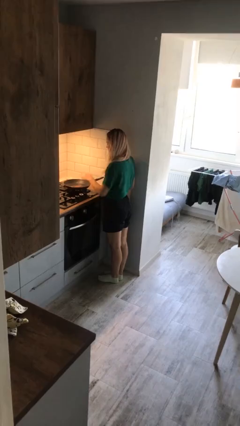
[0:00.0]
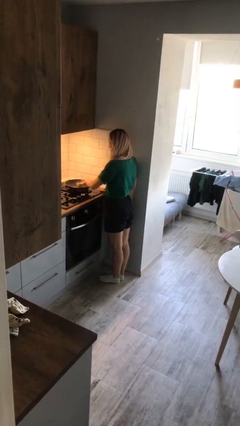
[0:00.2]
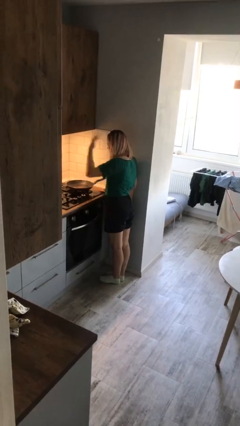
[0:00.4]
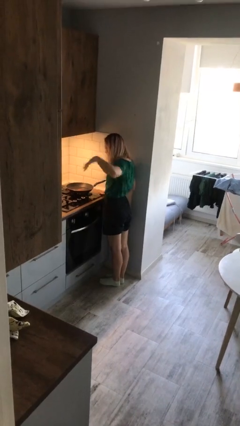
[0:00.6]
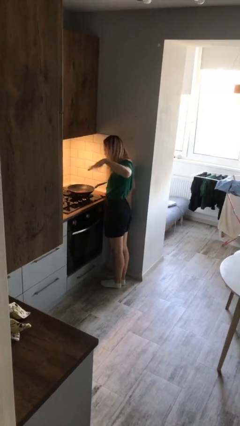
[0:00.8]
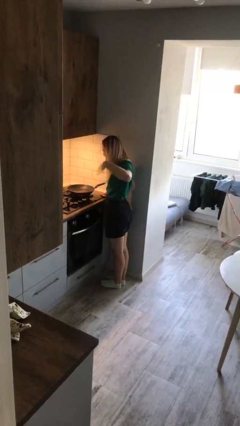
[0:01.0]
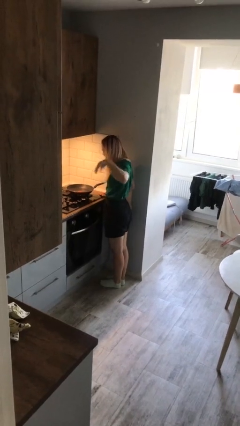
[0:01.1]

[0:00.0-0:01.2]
person burns hand

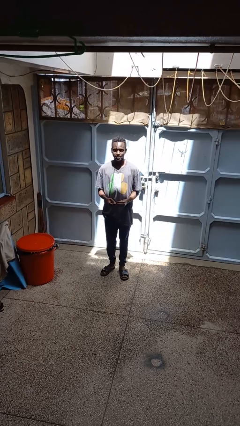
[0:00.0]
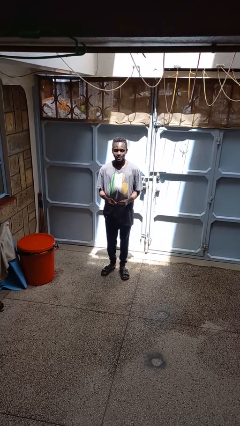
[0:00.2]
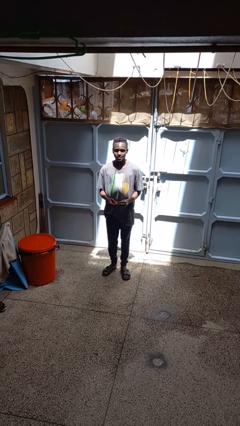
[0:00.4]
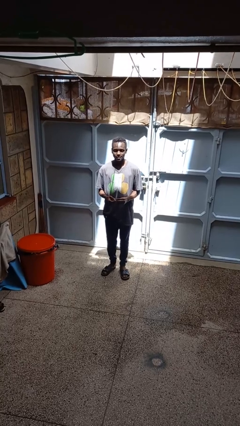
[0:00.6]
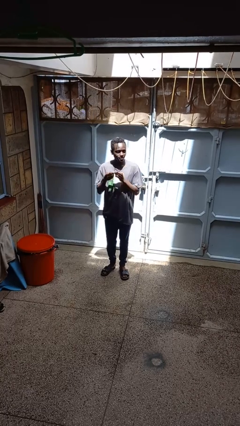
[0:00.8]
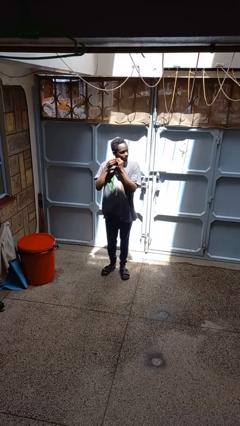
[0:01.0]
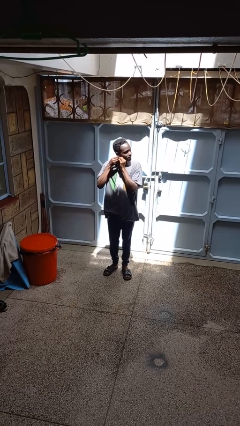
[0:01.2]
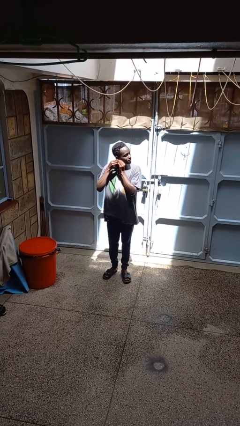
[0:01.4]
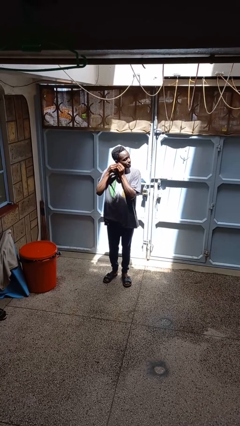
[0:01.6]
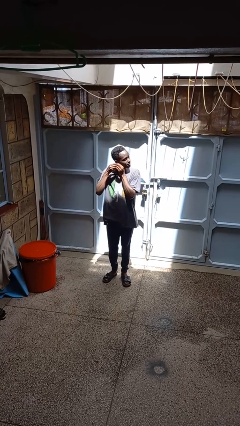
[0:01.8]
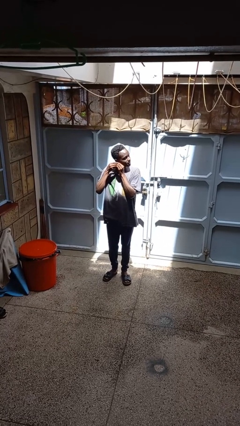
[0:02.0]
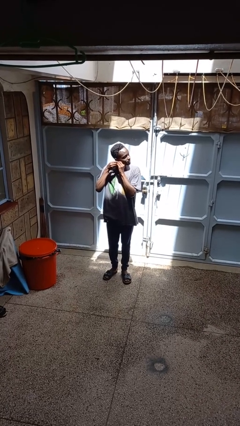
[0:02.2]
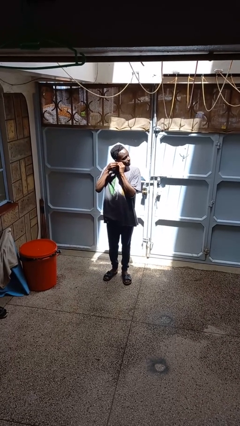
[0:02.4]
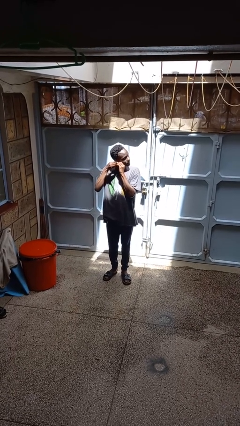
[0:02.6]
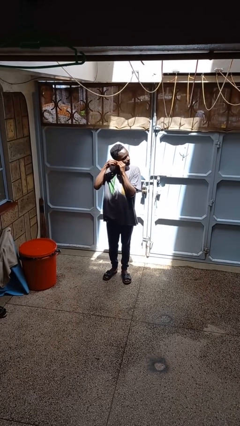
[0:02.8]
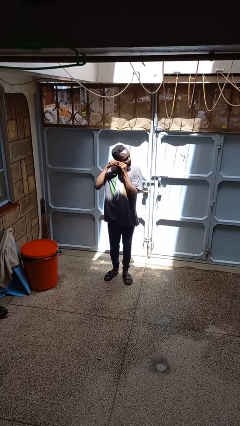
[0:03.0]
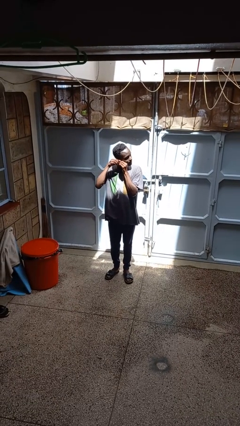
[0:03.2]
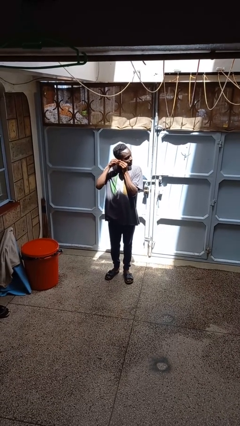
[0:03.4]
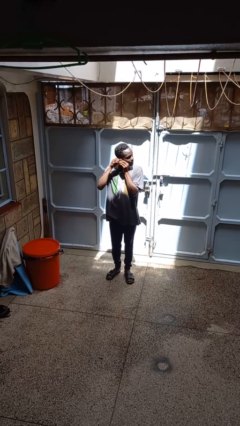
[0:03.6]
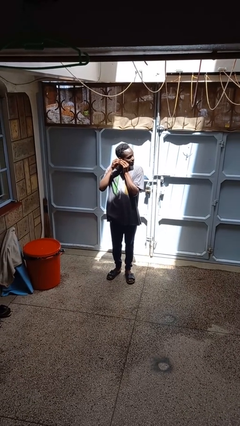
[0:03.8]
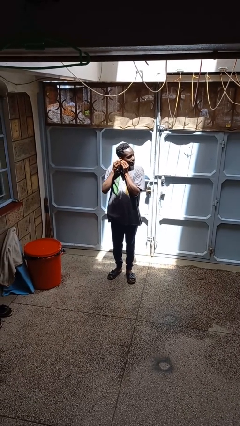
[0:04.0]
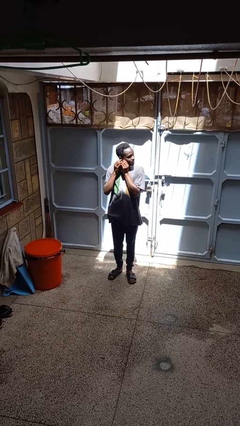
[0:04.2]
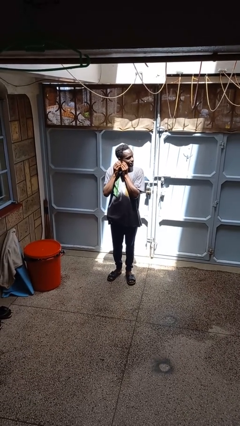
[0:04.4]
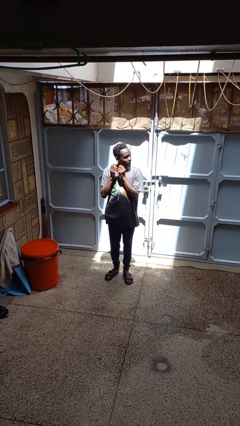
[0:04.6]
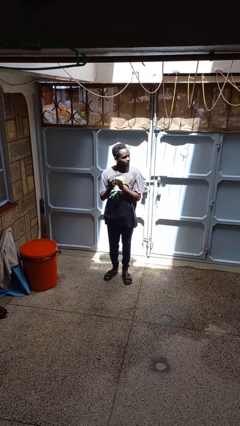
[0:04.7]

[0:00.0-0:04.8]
person puts on earrings

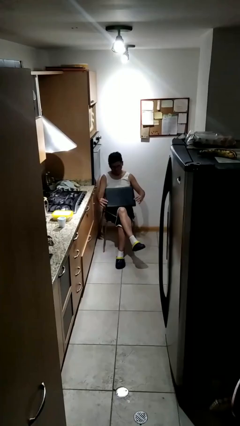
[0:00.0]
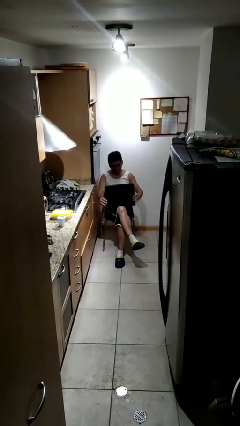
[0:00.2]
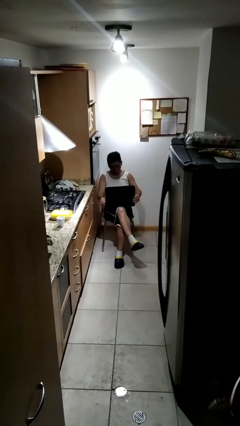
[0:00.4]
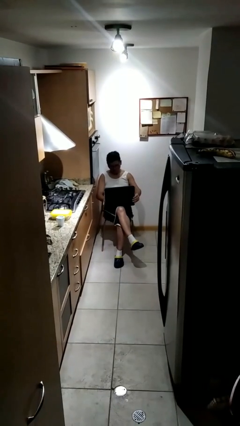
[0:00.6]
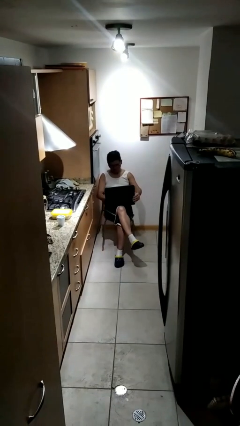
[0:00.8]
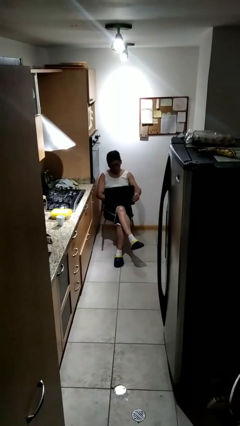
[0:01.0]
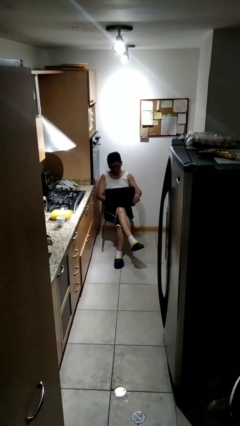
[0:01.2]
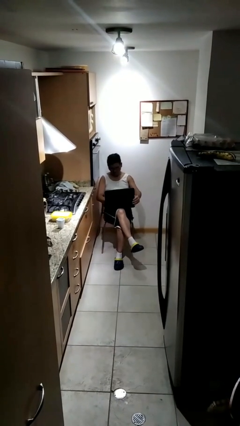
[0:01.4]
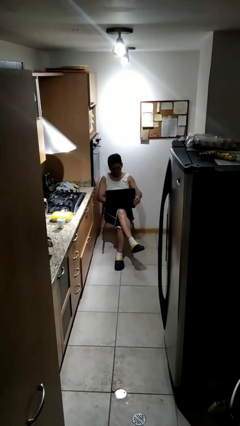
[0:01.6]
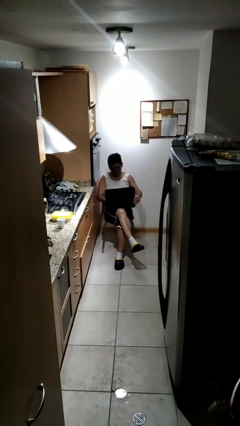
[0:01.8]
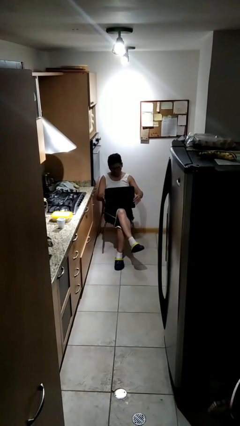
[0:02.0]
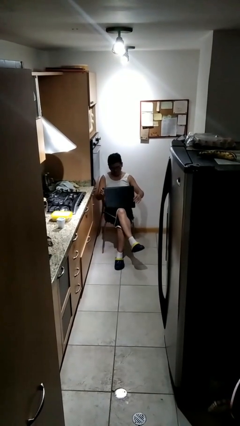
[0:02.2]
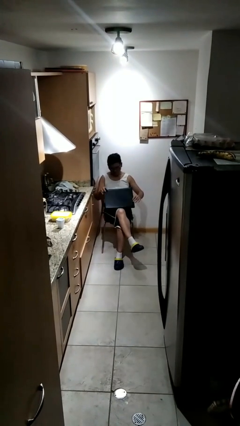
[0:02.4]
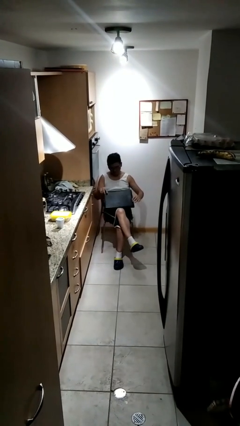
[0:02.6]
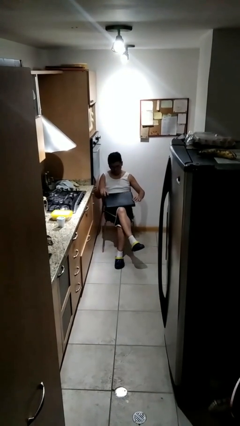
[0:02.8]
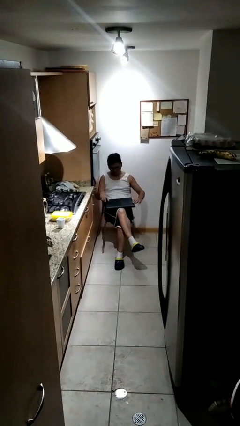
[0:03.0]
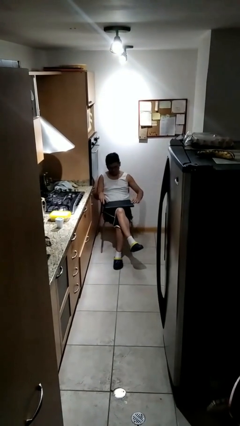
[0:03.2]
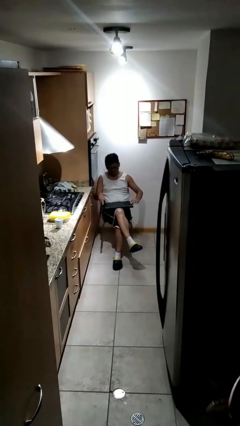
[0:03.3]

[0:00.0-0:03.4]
person interacts with laptop

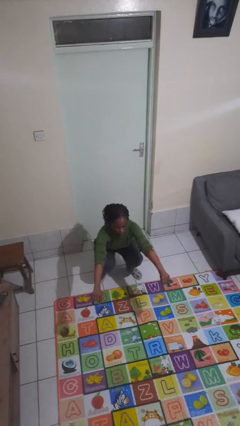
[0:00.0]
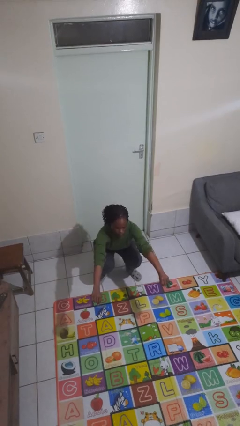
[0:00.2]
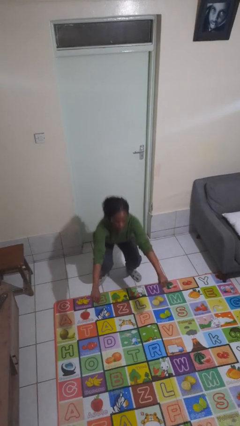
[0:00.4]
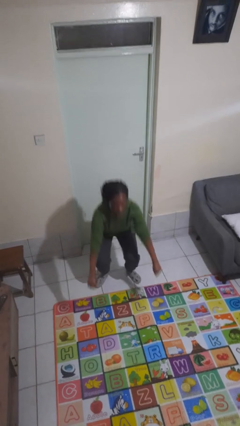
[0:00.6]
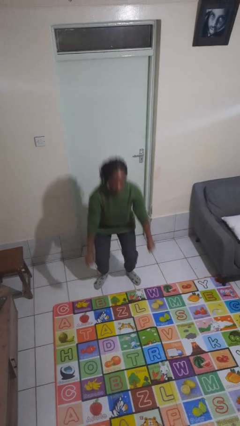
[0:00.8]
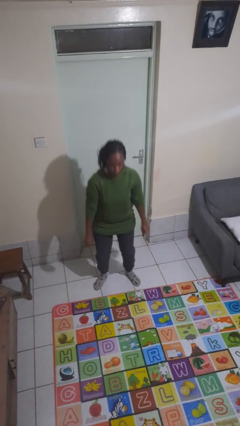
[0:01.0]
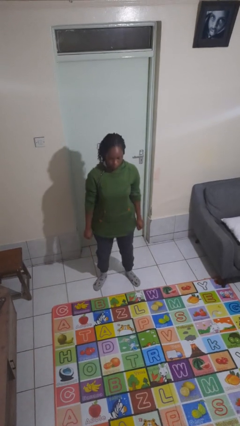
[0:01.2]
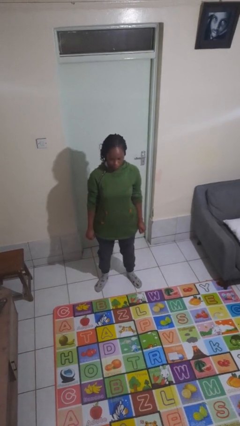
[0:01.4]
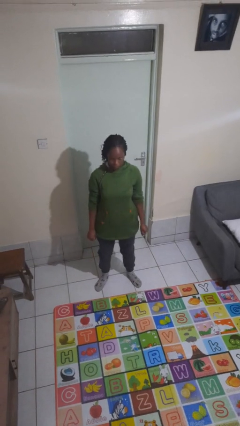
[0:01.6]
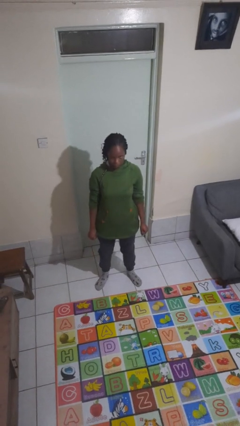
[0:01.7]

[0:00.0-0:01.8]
person stands up

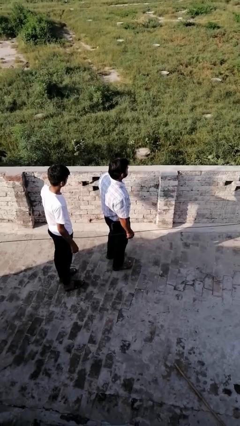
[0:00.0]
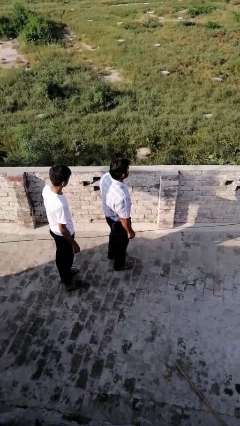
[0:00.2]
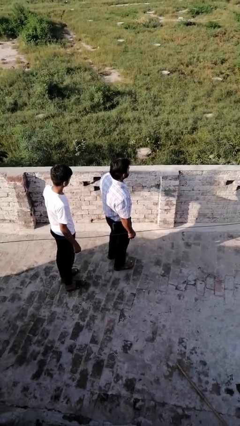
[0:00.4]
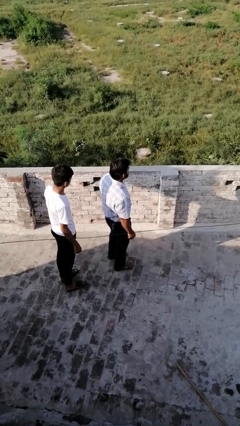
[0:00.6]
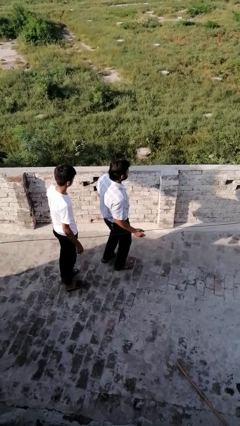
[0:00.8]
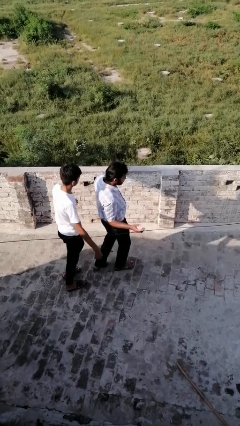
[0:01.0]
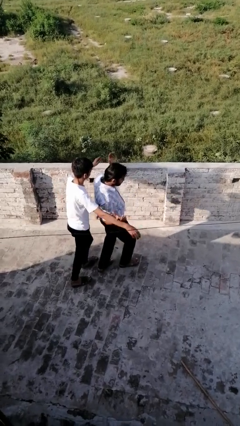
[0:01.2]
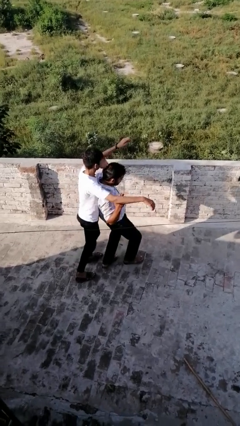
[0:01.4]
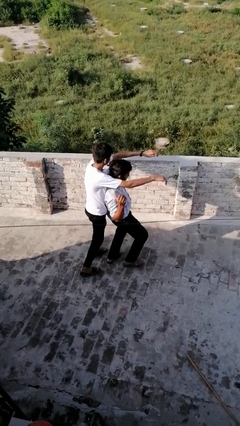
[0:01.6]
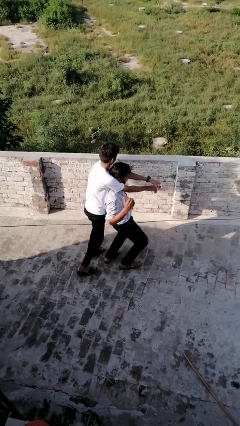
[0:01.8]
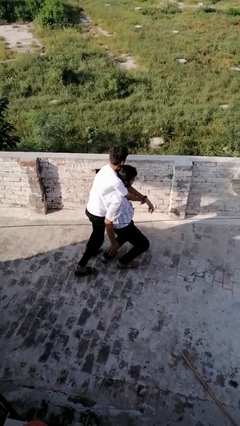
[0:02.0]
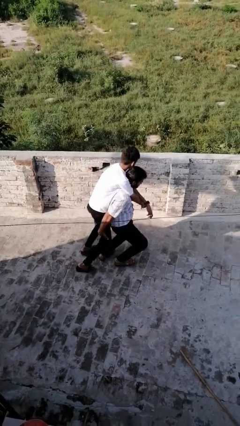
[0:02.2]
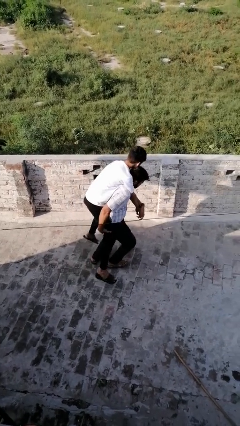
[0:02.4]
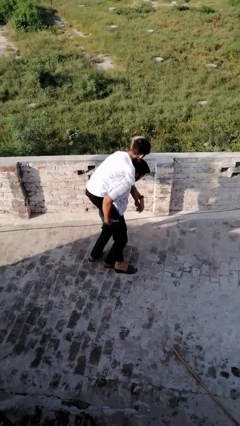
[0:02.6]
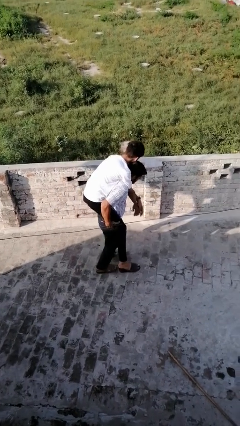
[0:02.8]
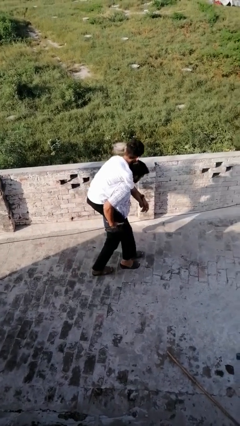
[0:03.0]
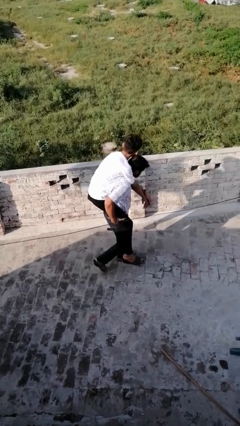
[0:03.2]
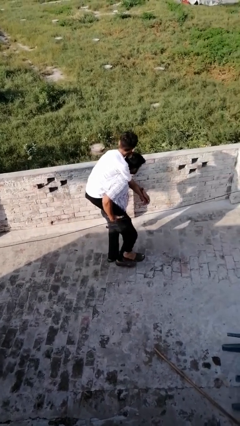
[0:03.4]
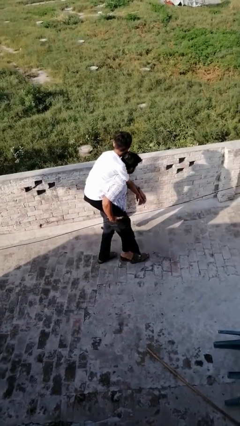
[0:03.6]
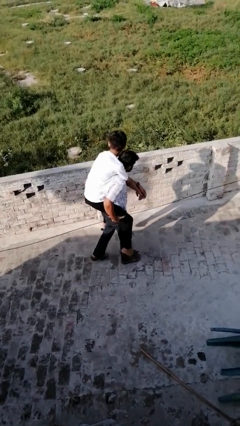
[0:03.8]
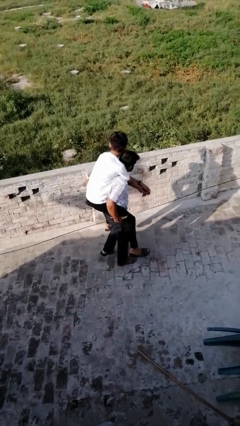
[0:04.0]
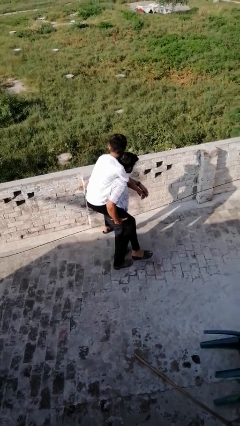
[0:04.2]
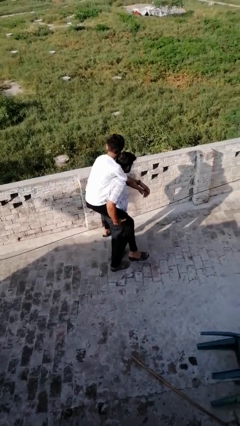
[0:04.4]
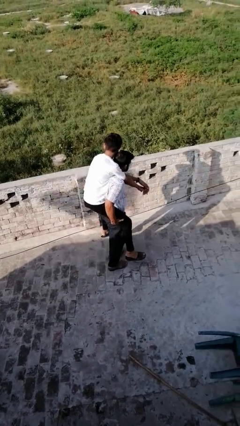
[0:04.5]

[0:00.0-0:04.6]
person carries person on back

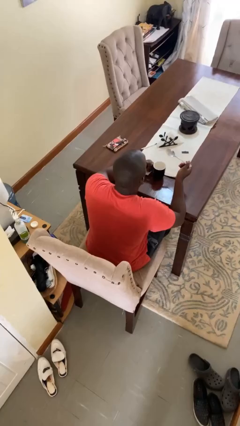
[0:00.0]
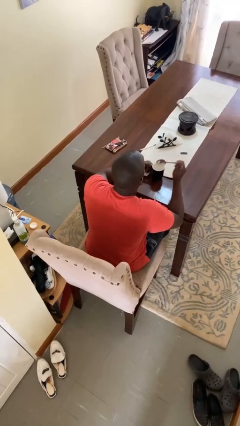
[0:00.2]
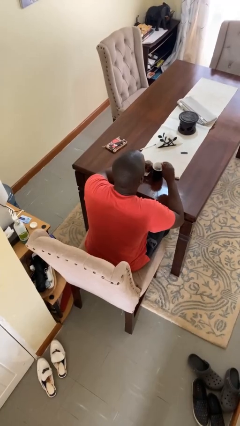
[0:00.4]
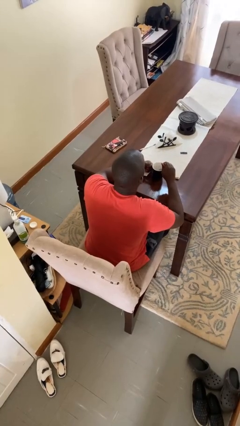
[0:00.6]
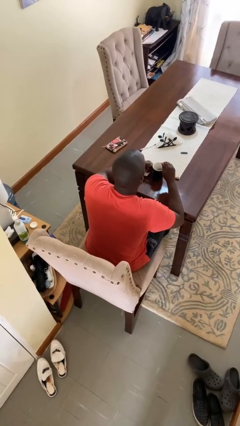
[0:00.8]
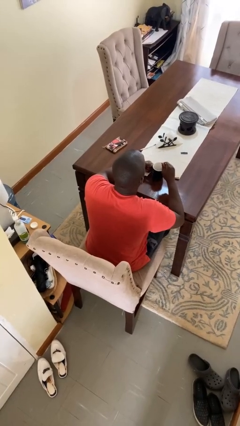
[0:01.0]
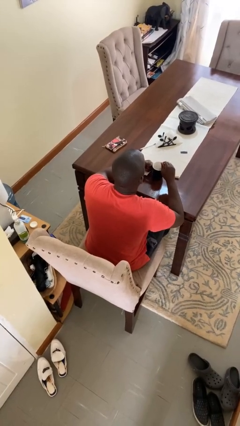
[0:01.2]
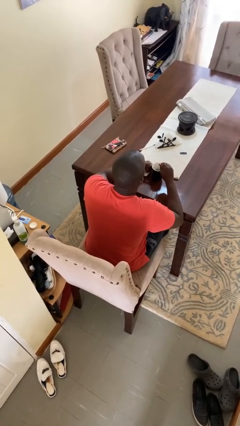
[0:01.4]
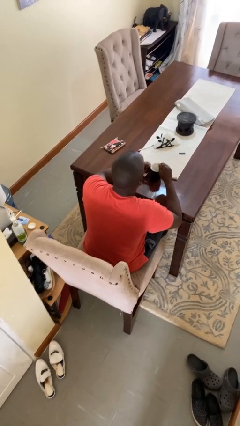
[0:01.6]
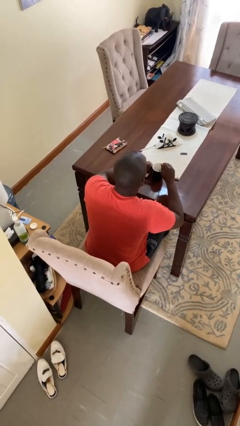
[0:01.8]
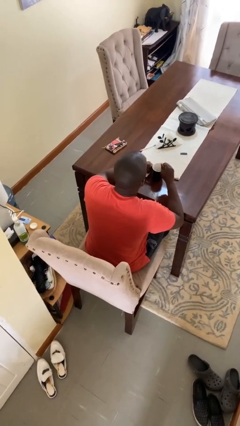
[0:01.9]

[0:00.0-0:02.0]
person stirs mug
